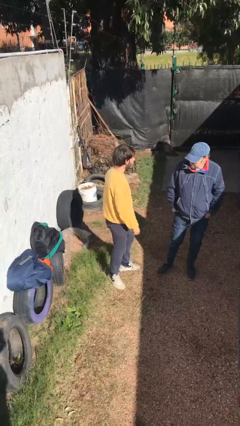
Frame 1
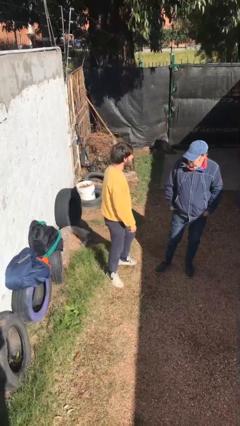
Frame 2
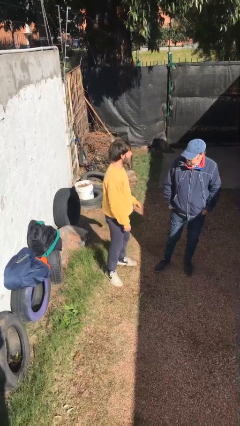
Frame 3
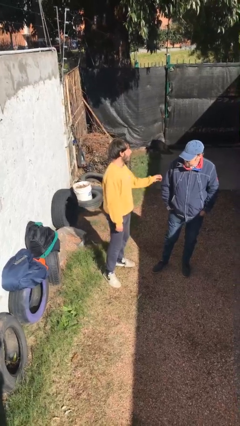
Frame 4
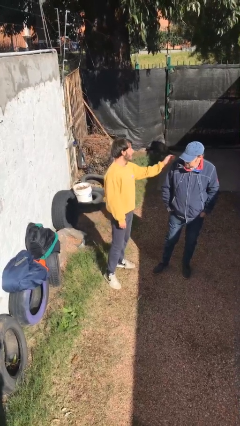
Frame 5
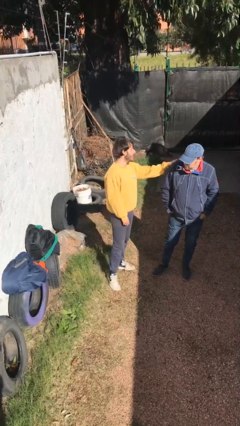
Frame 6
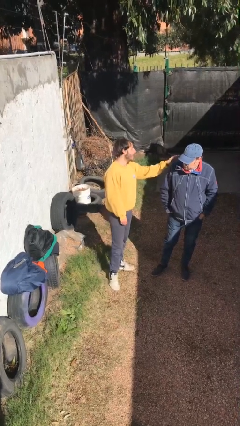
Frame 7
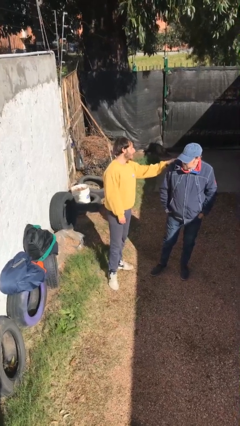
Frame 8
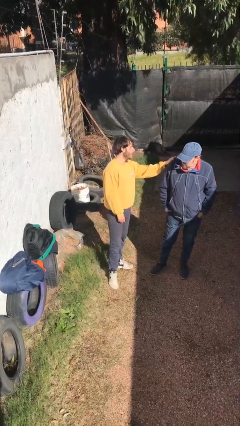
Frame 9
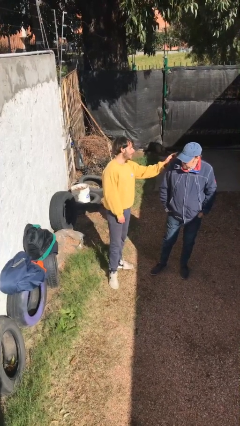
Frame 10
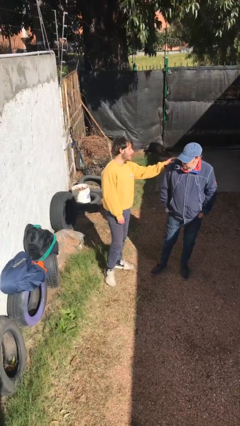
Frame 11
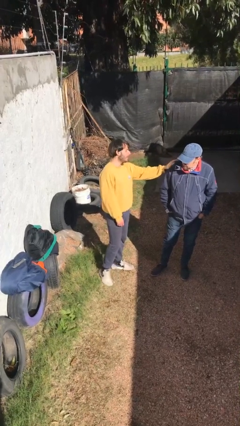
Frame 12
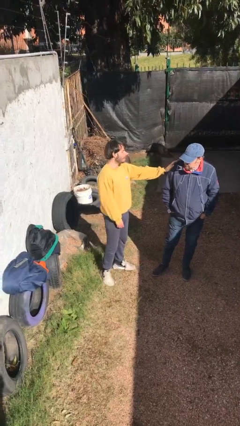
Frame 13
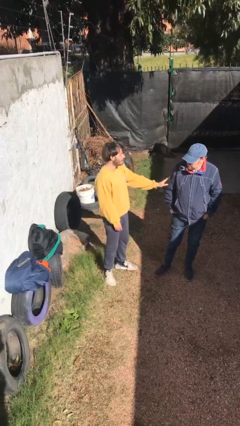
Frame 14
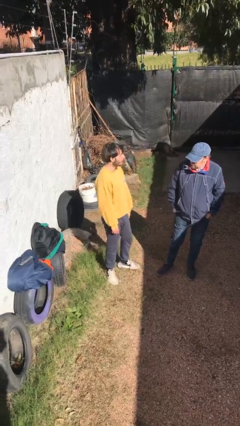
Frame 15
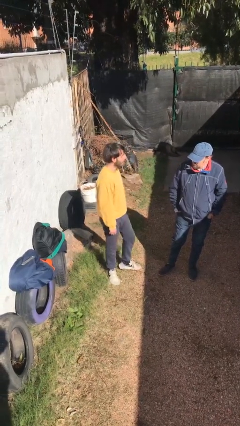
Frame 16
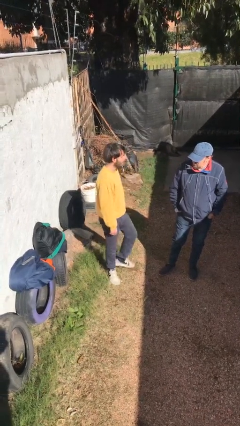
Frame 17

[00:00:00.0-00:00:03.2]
person pounds shoulders of person

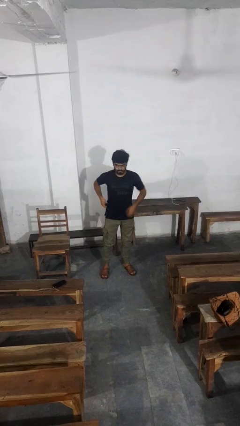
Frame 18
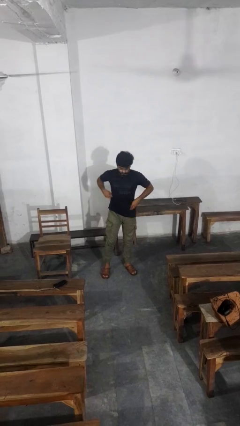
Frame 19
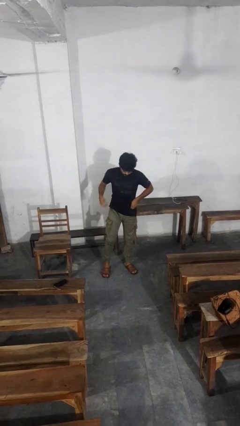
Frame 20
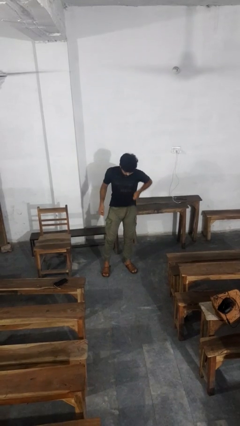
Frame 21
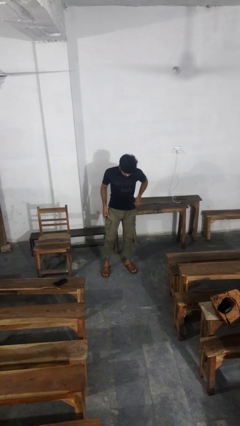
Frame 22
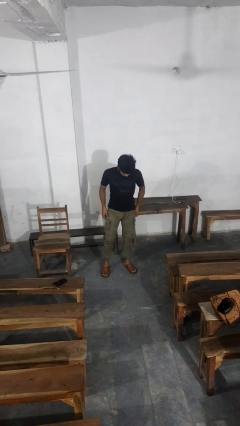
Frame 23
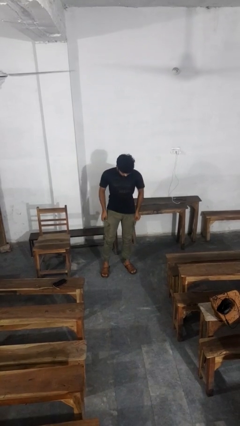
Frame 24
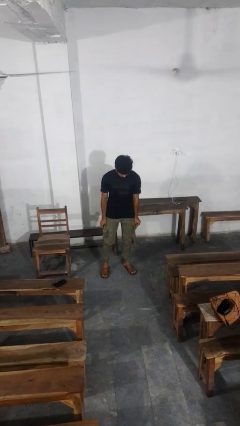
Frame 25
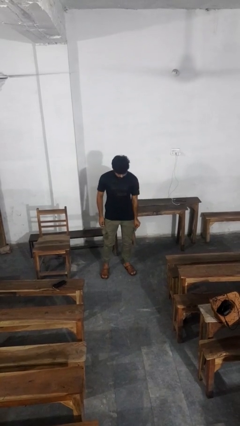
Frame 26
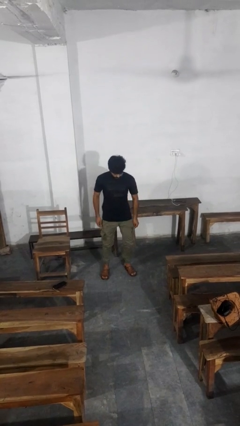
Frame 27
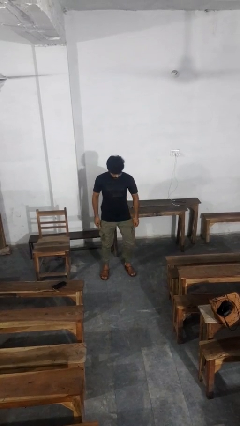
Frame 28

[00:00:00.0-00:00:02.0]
person hikes up pants

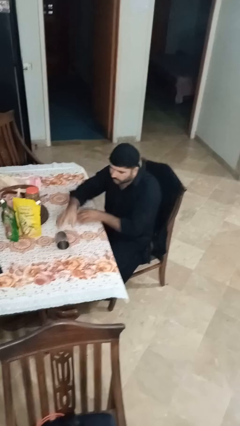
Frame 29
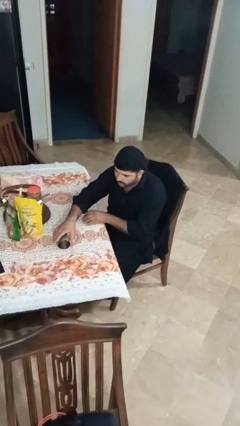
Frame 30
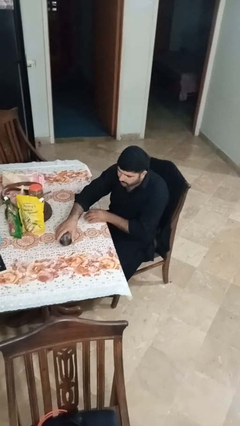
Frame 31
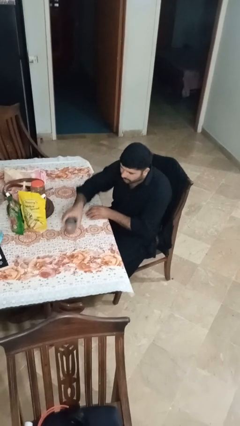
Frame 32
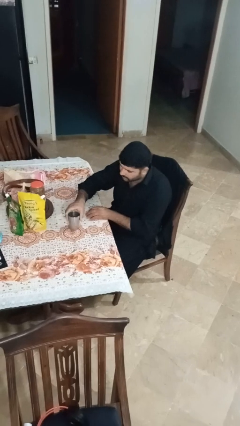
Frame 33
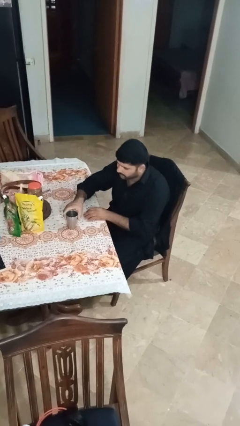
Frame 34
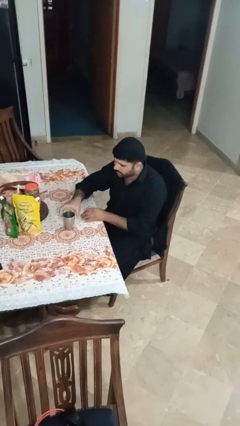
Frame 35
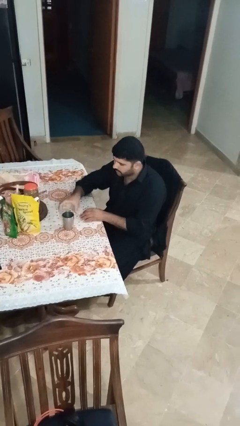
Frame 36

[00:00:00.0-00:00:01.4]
person sets upright glass

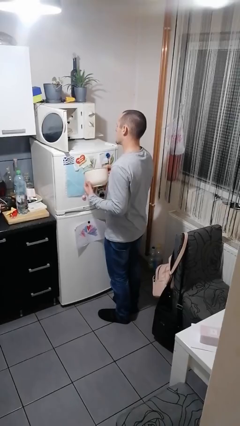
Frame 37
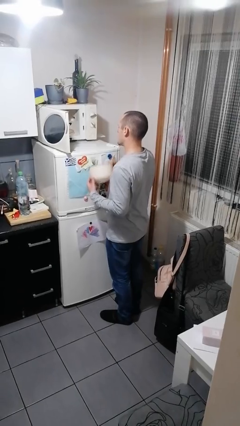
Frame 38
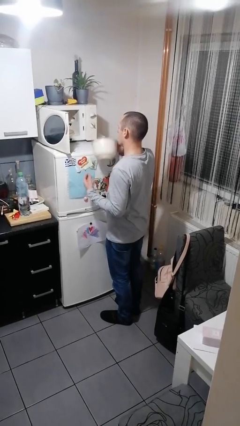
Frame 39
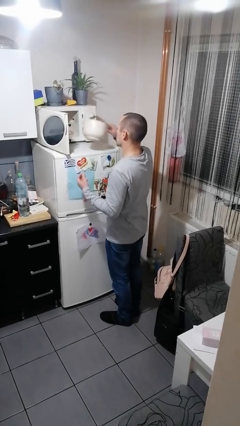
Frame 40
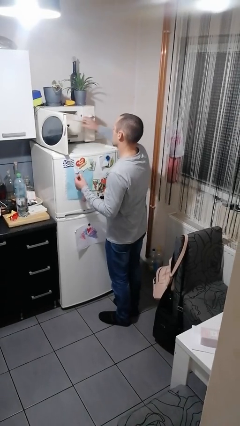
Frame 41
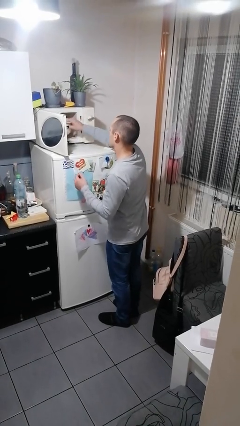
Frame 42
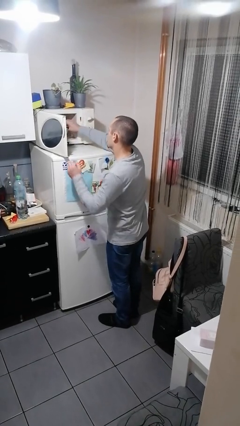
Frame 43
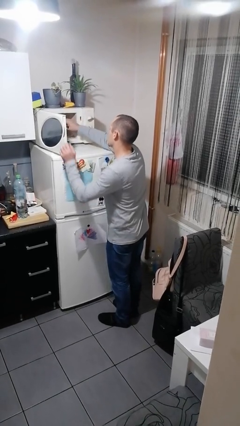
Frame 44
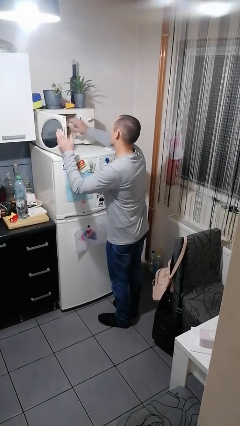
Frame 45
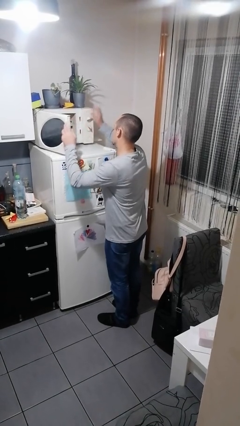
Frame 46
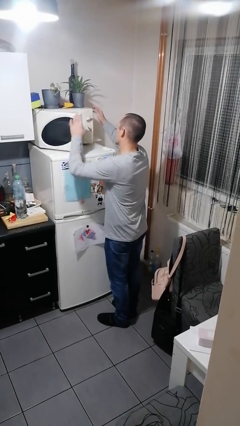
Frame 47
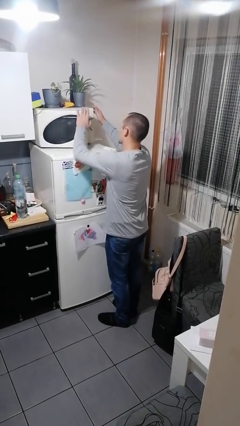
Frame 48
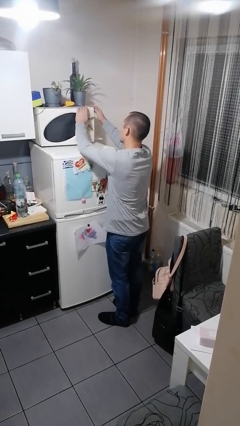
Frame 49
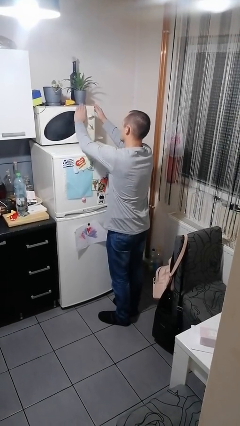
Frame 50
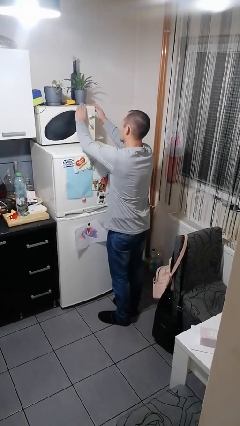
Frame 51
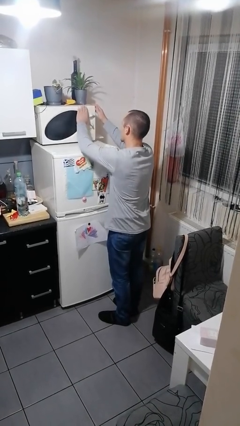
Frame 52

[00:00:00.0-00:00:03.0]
person puts object into microwave

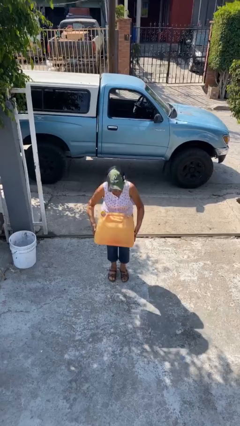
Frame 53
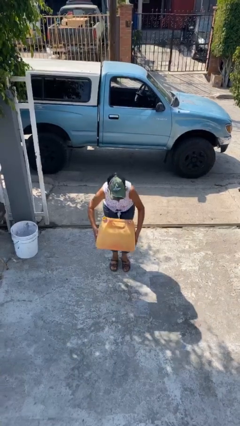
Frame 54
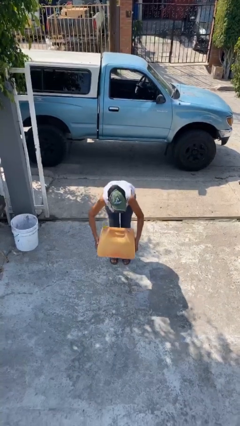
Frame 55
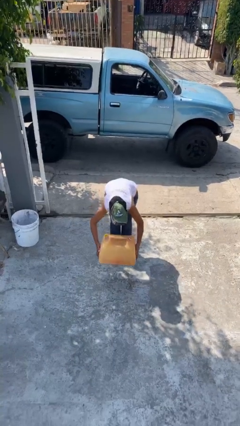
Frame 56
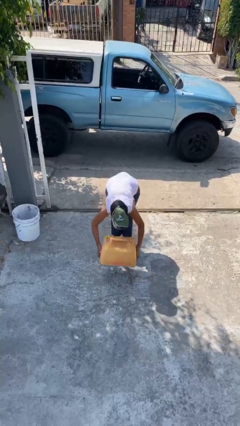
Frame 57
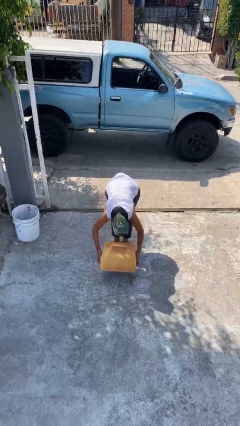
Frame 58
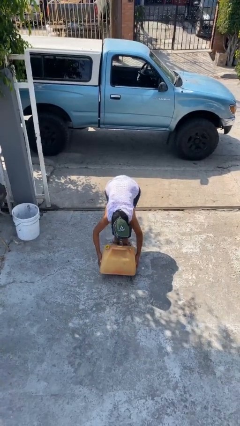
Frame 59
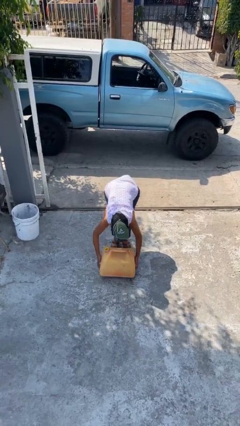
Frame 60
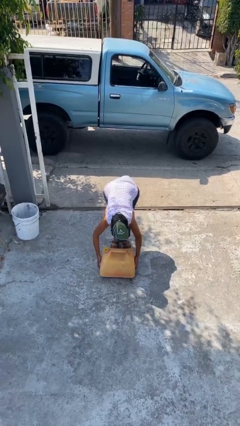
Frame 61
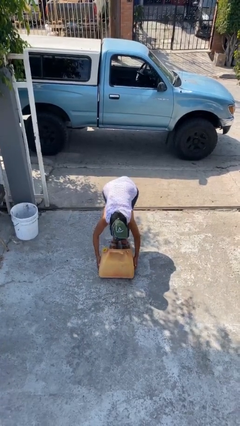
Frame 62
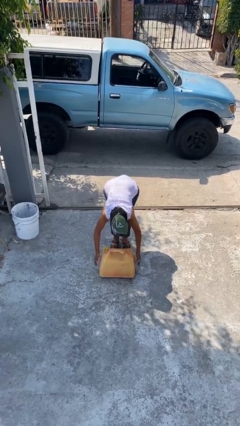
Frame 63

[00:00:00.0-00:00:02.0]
person puts down object on floor

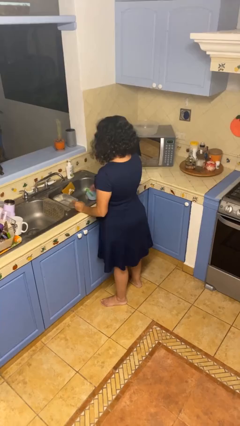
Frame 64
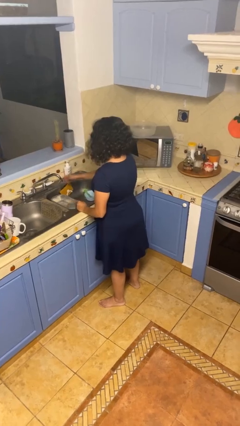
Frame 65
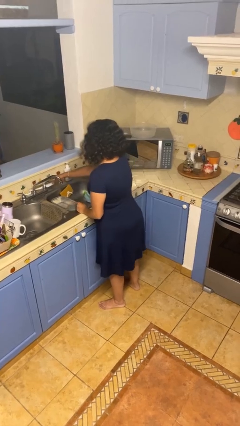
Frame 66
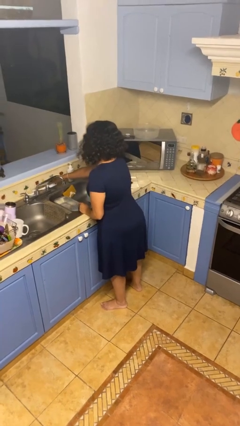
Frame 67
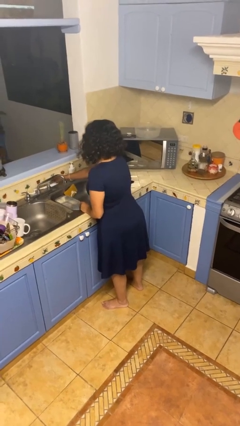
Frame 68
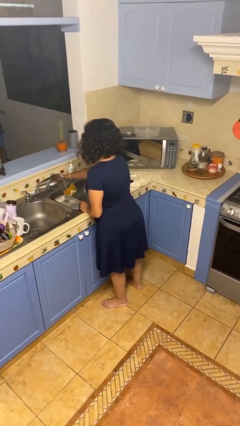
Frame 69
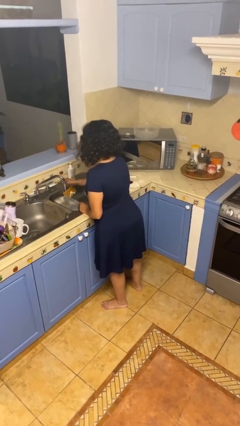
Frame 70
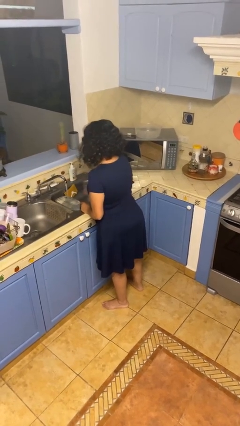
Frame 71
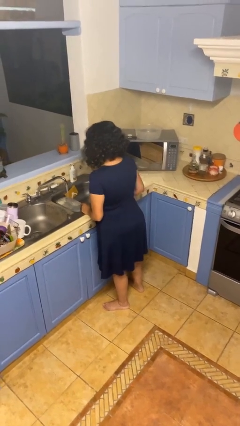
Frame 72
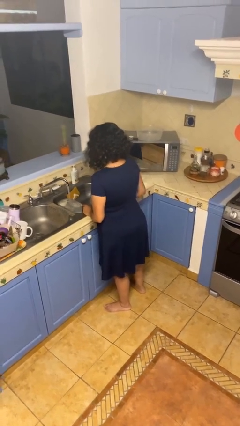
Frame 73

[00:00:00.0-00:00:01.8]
person turns on faucet

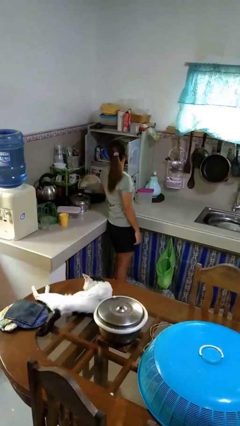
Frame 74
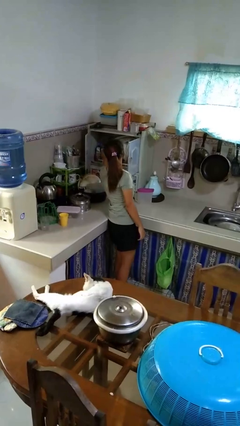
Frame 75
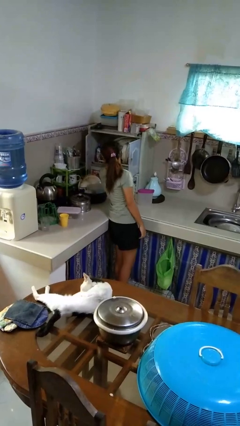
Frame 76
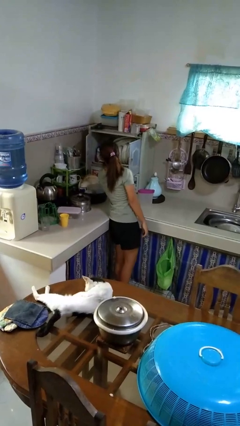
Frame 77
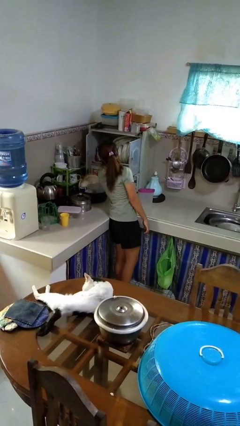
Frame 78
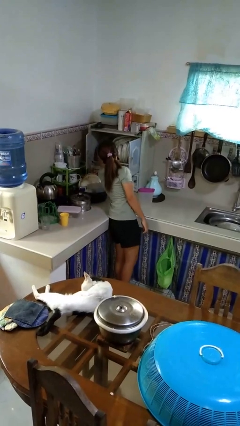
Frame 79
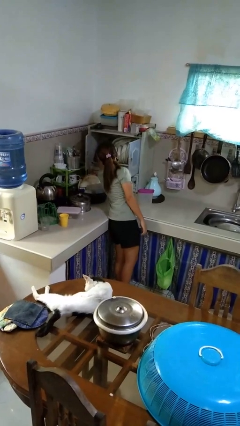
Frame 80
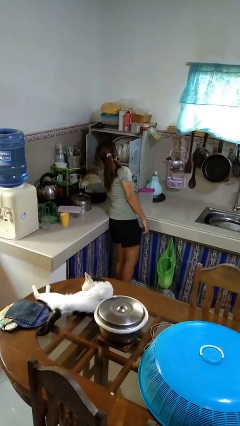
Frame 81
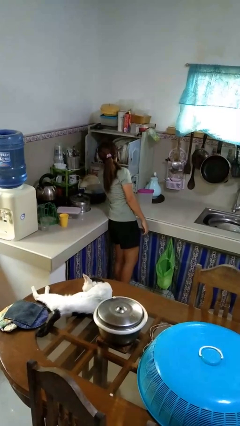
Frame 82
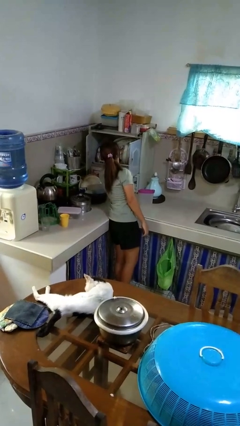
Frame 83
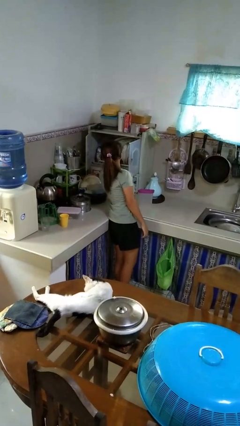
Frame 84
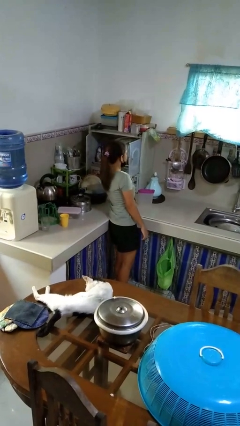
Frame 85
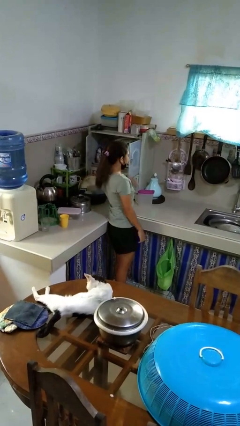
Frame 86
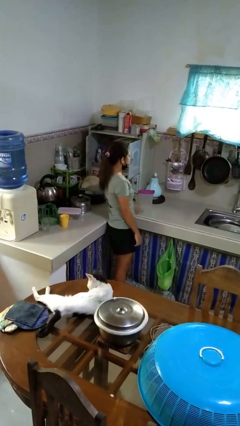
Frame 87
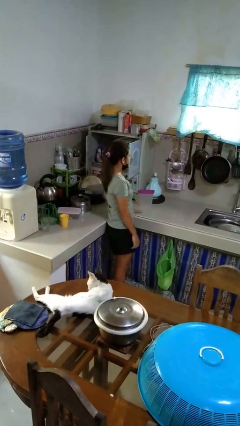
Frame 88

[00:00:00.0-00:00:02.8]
person searches in kitchen drawer

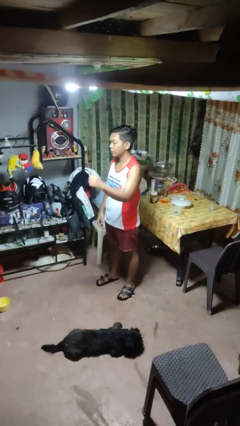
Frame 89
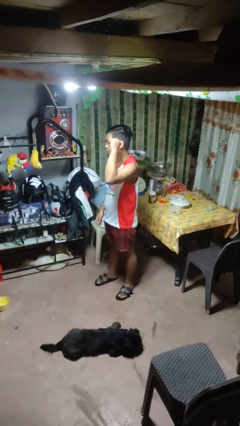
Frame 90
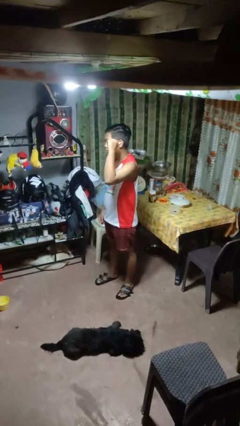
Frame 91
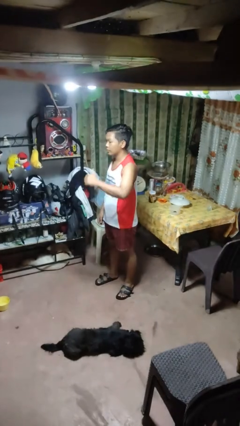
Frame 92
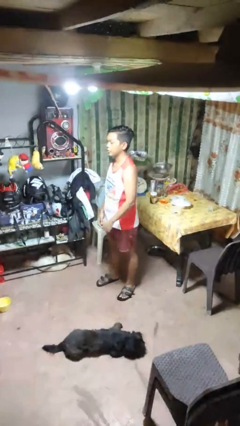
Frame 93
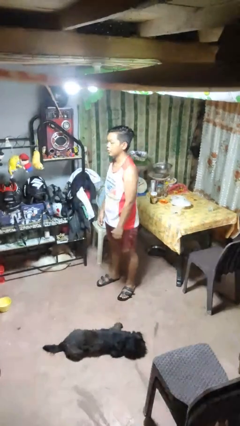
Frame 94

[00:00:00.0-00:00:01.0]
person gestures behind me
